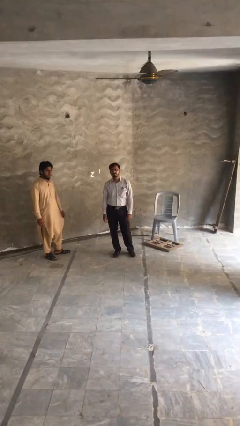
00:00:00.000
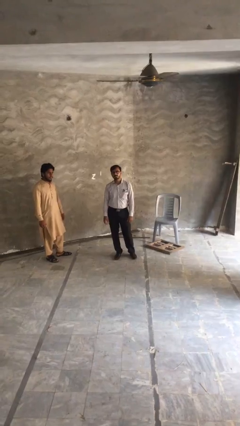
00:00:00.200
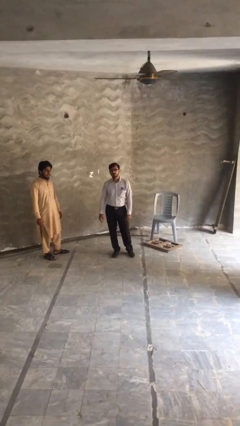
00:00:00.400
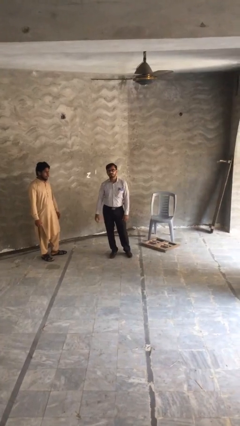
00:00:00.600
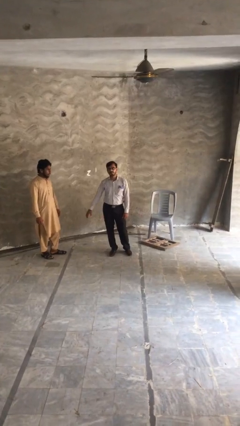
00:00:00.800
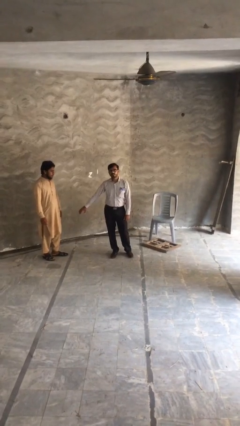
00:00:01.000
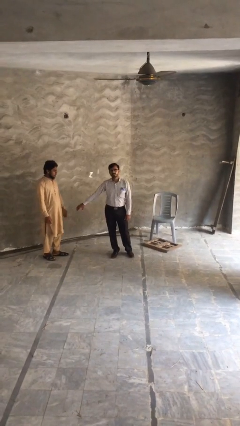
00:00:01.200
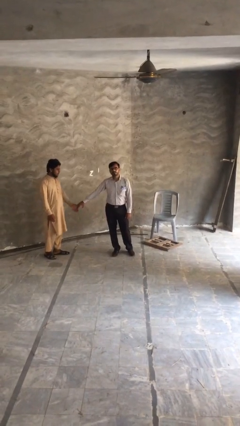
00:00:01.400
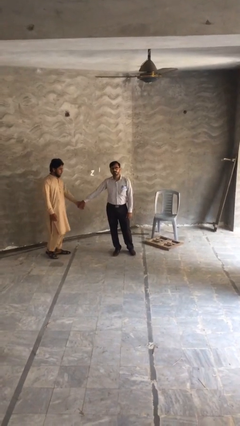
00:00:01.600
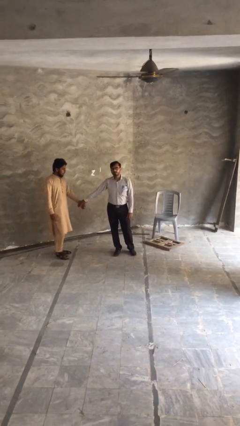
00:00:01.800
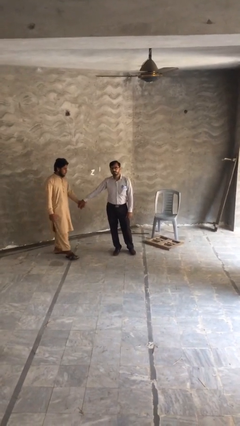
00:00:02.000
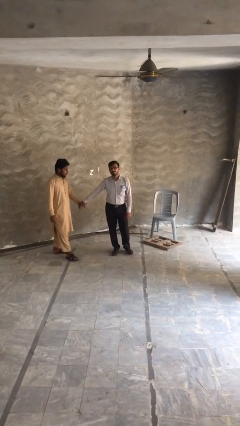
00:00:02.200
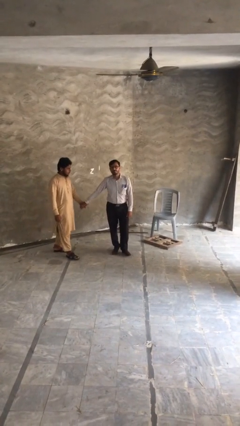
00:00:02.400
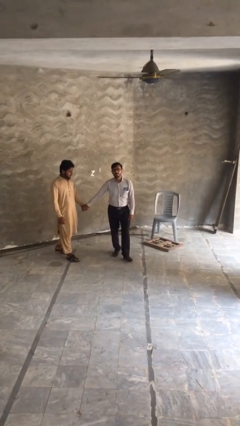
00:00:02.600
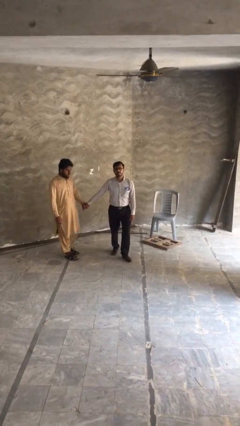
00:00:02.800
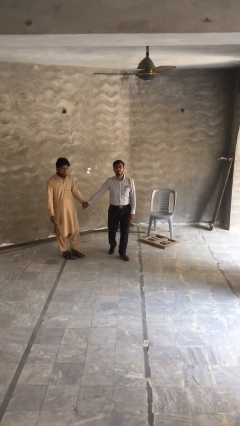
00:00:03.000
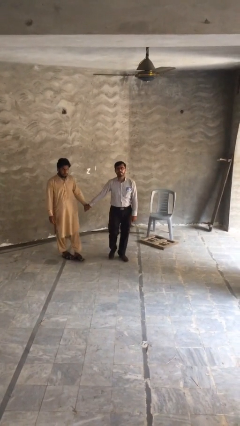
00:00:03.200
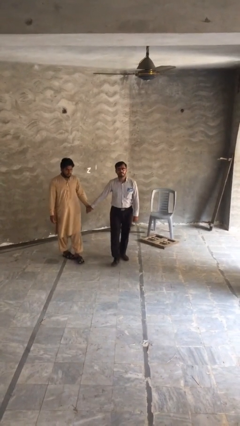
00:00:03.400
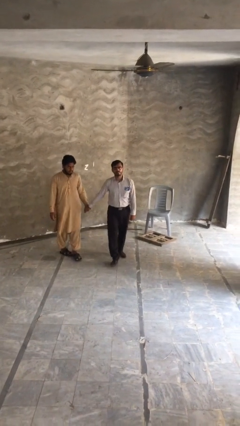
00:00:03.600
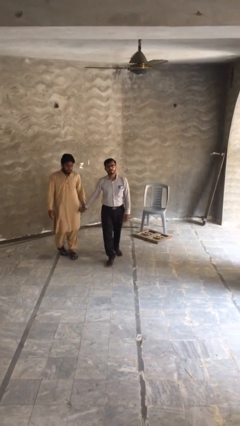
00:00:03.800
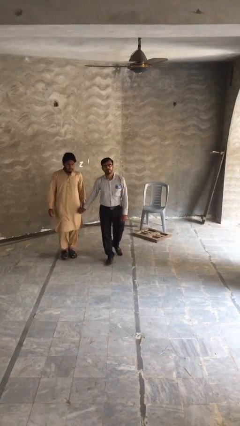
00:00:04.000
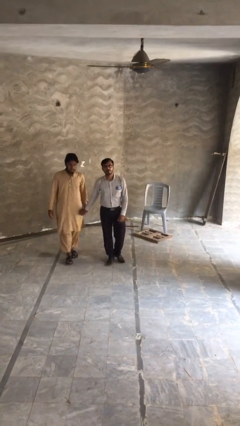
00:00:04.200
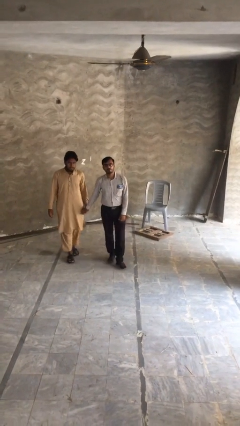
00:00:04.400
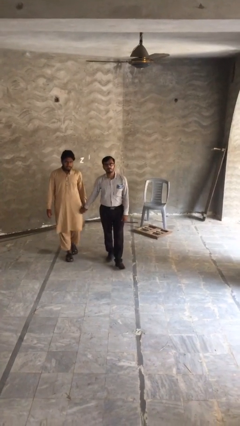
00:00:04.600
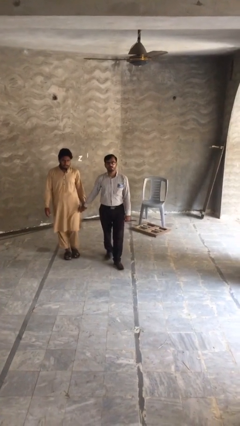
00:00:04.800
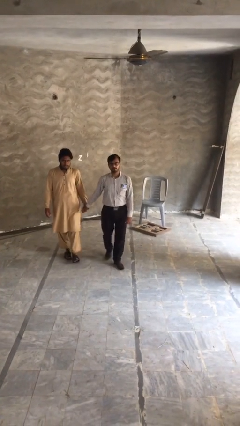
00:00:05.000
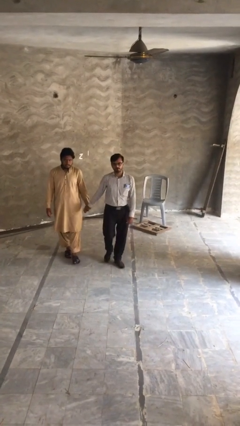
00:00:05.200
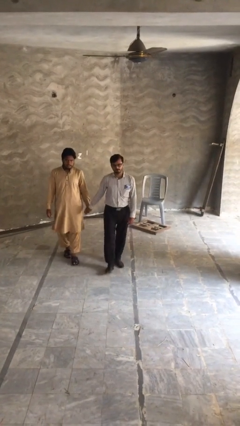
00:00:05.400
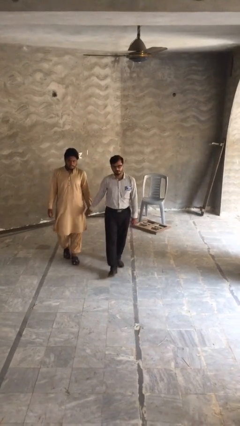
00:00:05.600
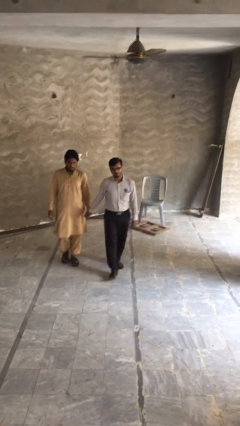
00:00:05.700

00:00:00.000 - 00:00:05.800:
person holds hand

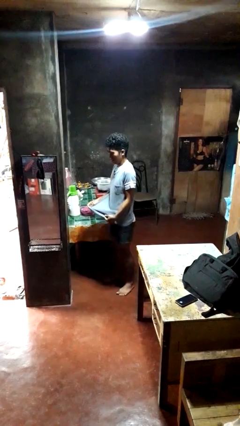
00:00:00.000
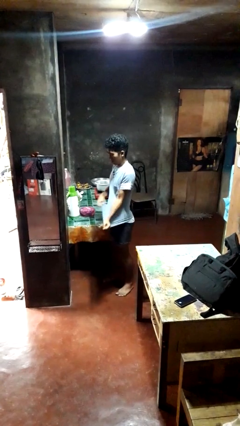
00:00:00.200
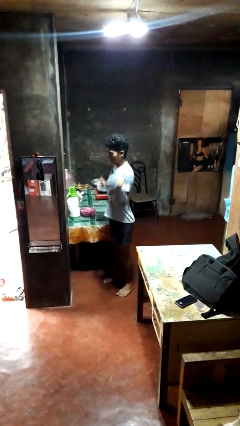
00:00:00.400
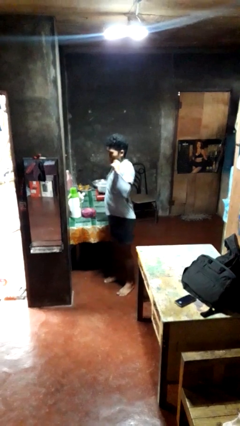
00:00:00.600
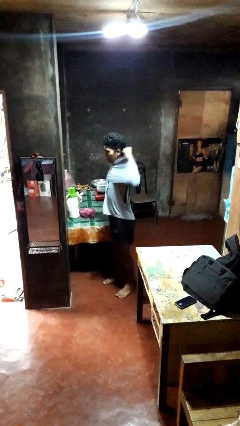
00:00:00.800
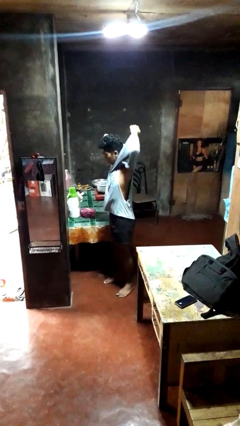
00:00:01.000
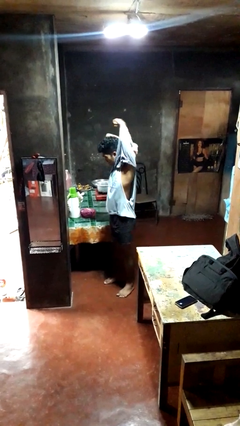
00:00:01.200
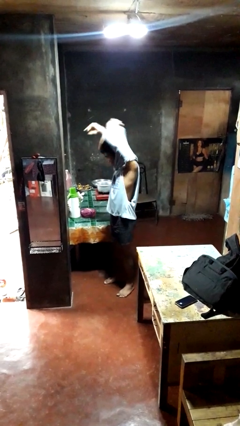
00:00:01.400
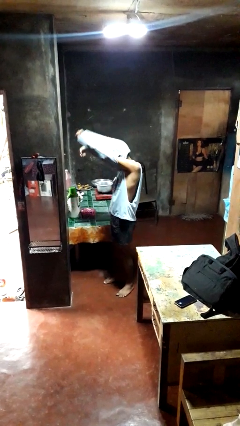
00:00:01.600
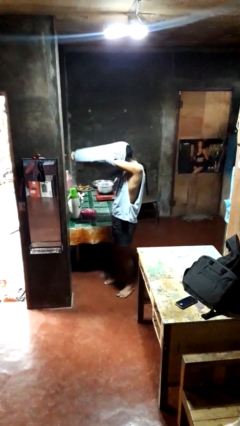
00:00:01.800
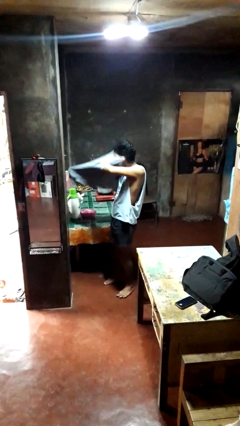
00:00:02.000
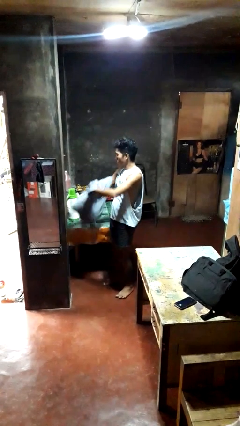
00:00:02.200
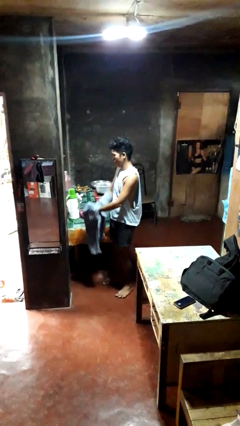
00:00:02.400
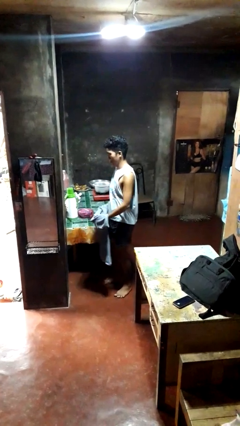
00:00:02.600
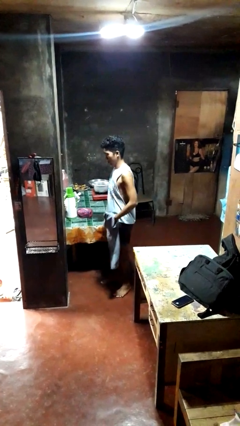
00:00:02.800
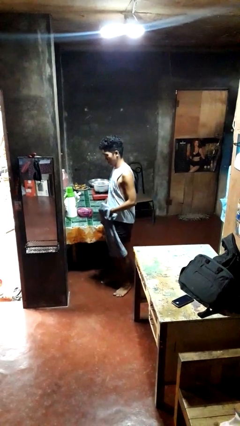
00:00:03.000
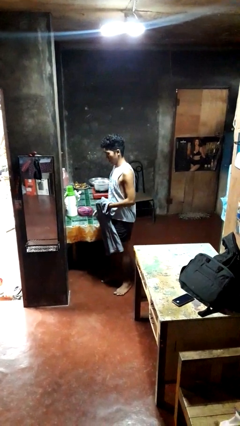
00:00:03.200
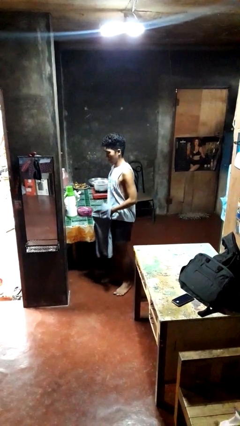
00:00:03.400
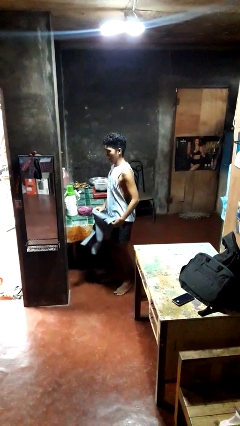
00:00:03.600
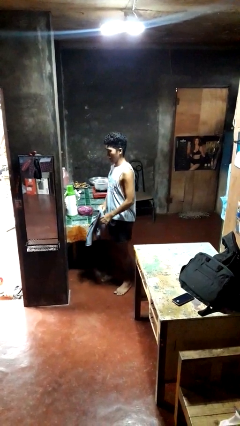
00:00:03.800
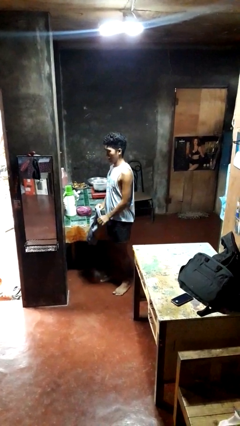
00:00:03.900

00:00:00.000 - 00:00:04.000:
person takes off shirt

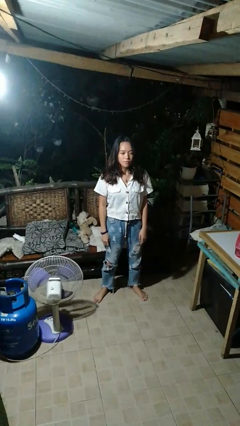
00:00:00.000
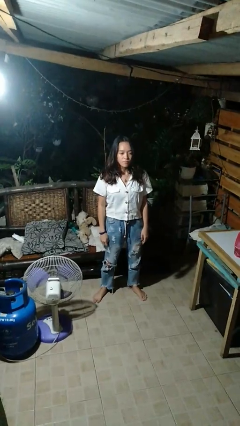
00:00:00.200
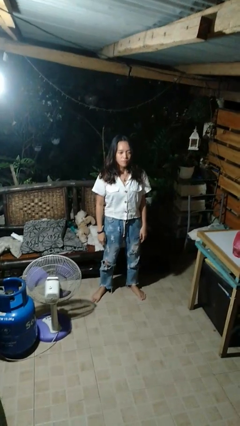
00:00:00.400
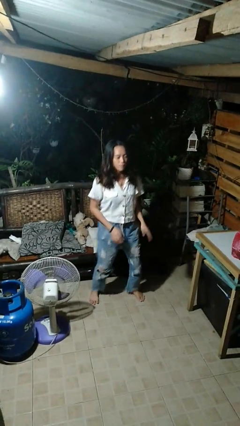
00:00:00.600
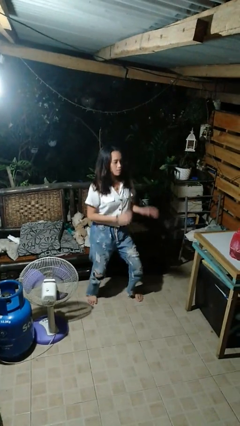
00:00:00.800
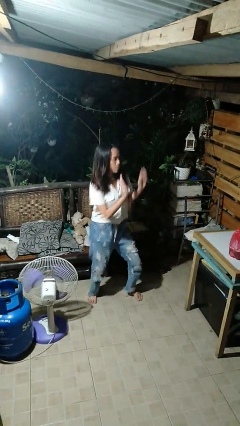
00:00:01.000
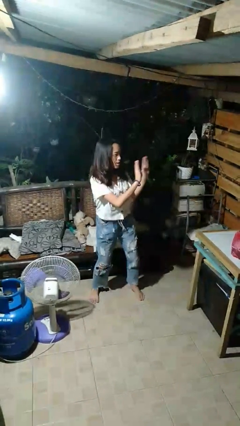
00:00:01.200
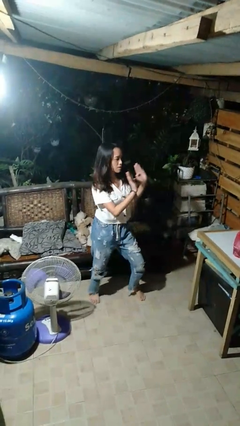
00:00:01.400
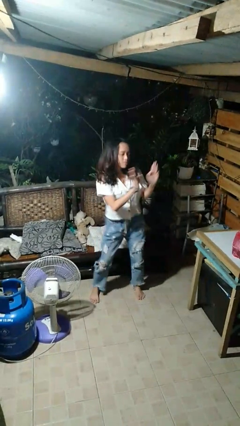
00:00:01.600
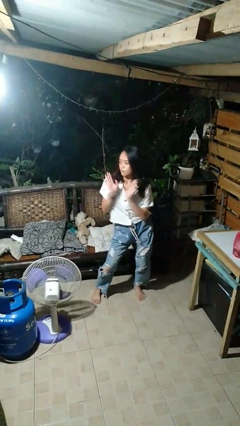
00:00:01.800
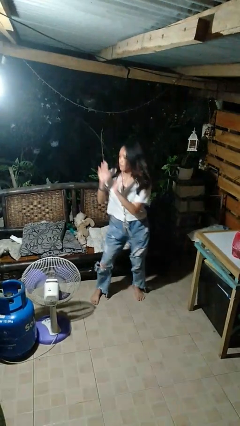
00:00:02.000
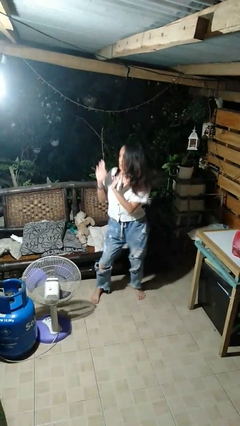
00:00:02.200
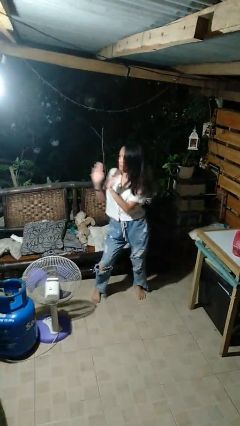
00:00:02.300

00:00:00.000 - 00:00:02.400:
person dances in place

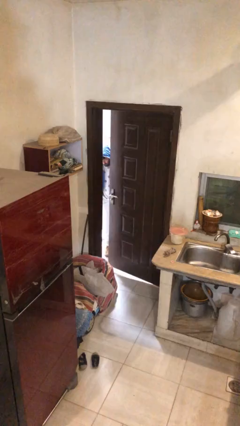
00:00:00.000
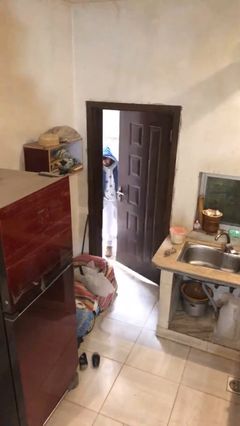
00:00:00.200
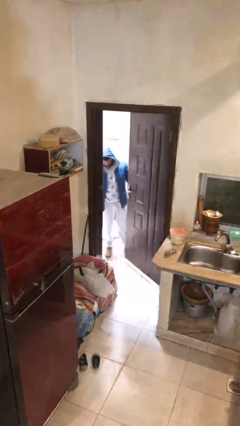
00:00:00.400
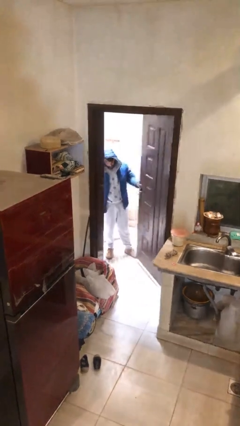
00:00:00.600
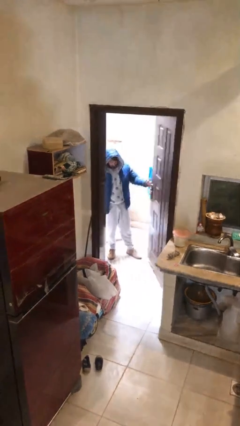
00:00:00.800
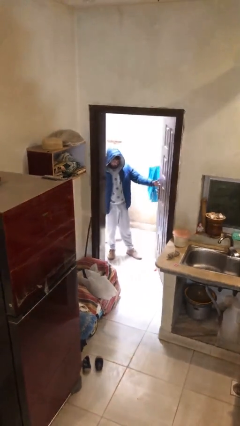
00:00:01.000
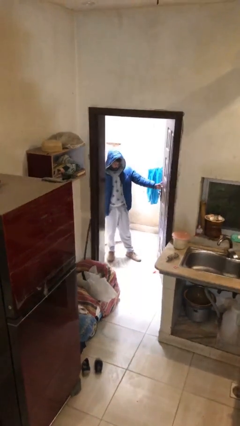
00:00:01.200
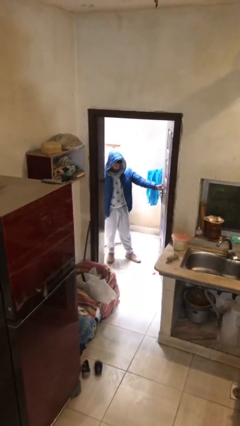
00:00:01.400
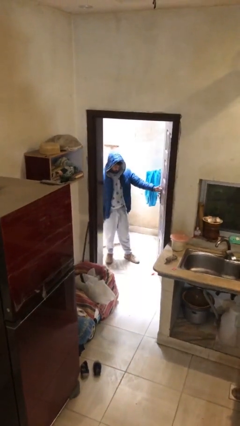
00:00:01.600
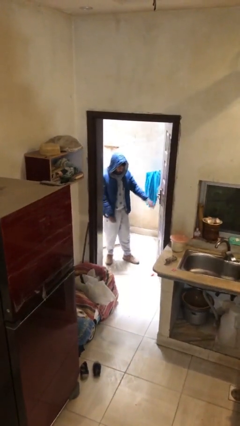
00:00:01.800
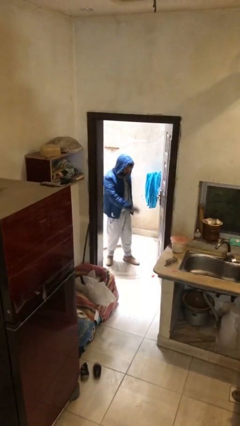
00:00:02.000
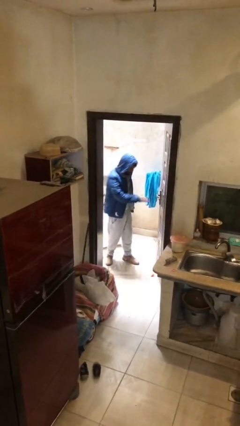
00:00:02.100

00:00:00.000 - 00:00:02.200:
person opens facility door

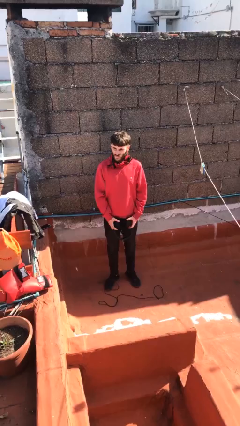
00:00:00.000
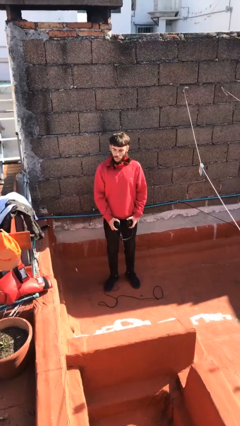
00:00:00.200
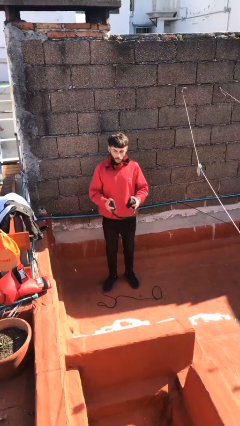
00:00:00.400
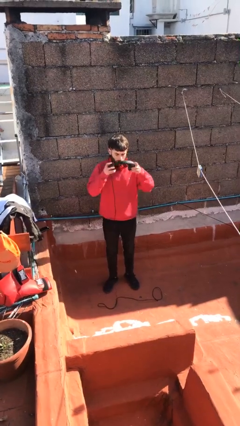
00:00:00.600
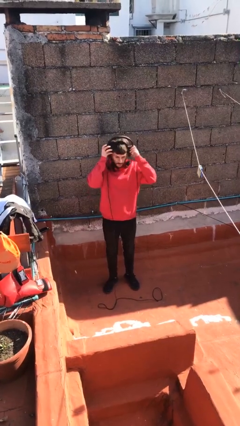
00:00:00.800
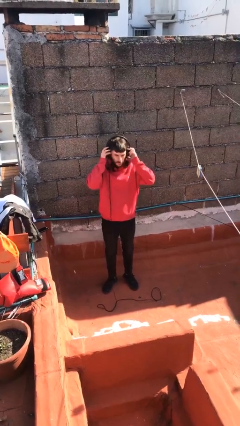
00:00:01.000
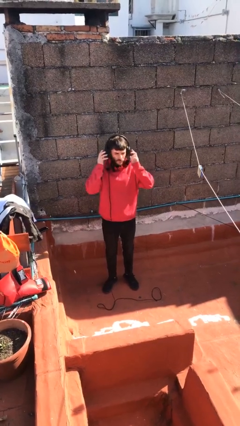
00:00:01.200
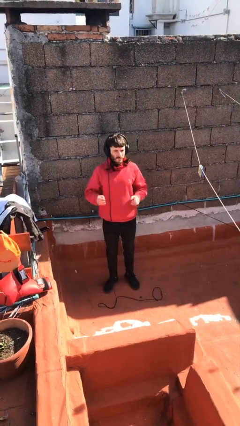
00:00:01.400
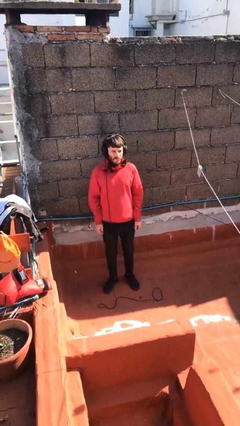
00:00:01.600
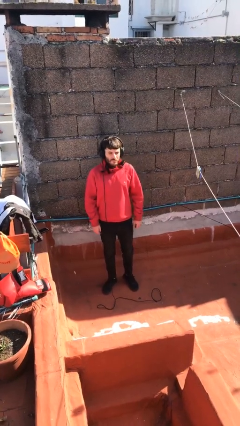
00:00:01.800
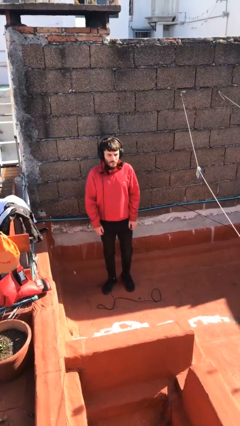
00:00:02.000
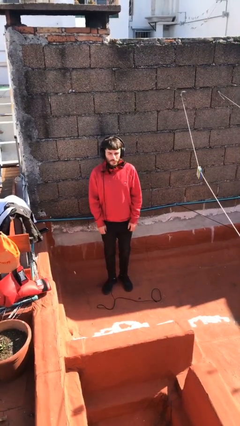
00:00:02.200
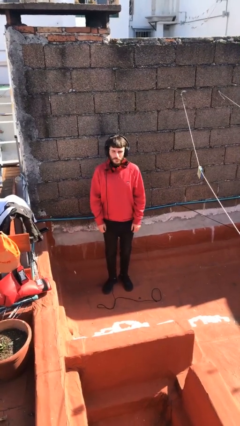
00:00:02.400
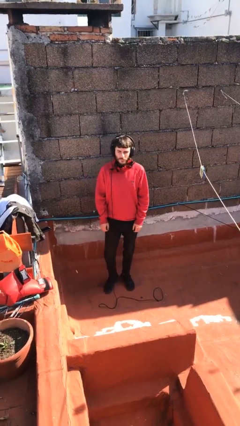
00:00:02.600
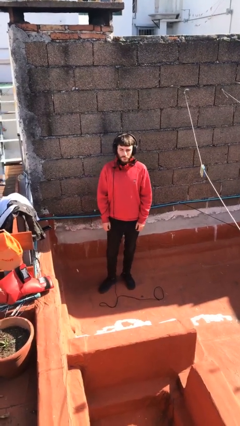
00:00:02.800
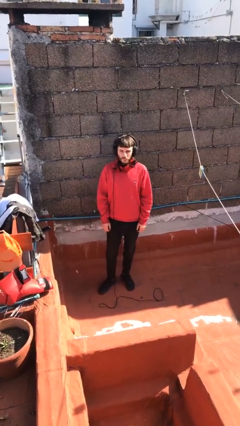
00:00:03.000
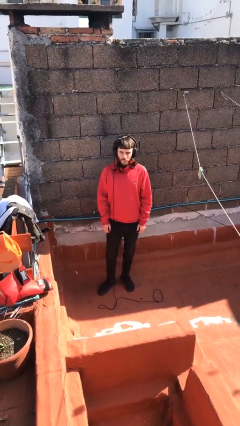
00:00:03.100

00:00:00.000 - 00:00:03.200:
person puts on headphones

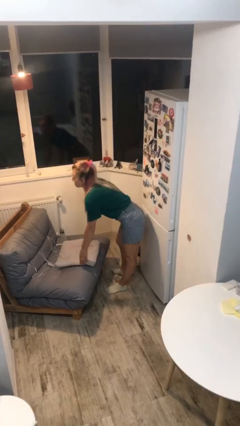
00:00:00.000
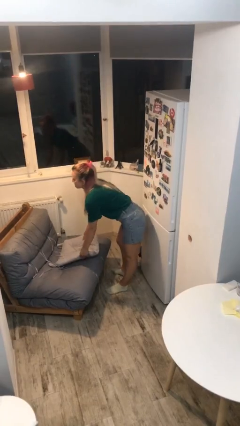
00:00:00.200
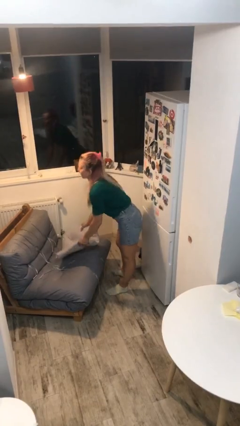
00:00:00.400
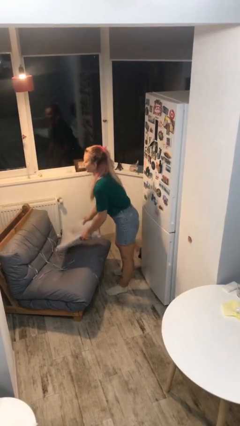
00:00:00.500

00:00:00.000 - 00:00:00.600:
person picks up object from couch
